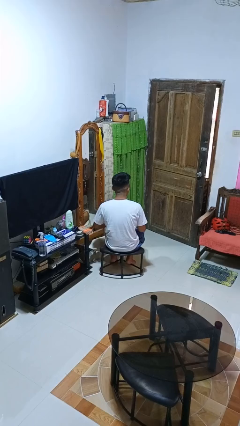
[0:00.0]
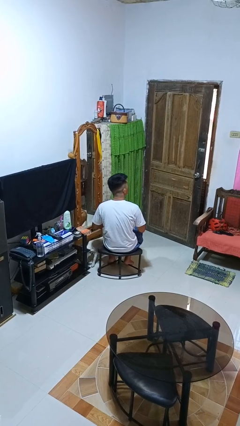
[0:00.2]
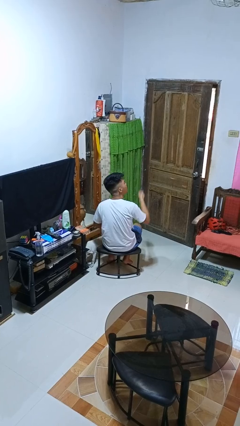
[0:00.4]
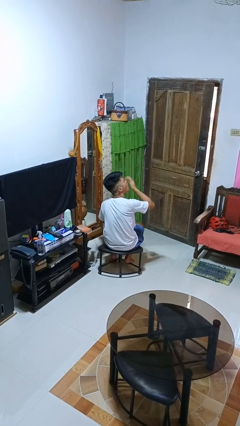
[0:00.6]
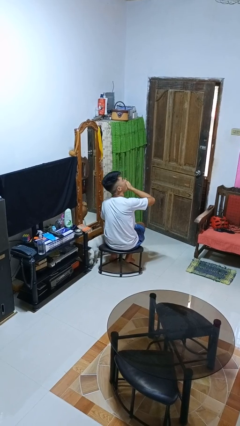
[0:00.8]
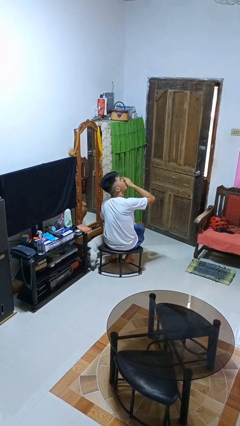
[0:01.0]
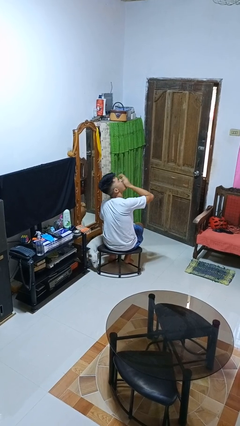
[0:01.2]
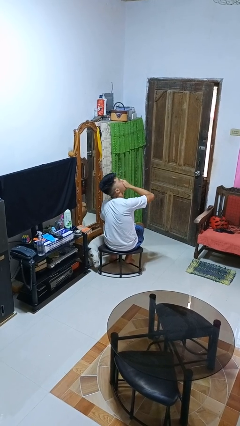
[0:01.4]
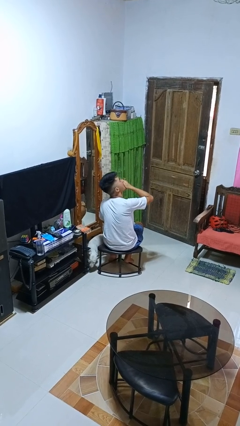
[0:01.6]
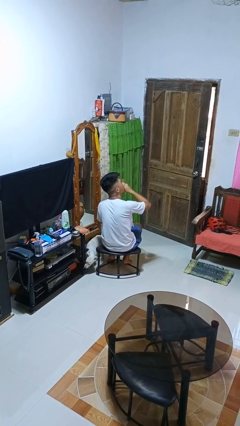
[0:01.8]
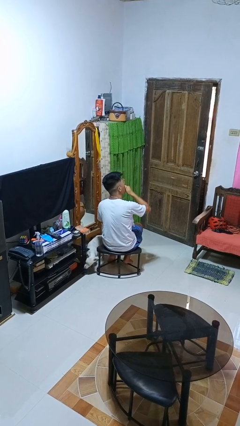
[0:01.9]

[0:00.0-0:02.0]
person yawns

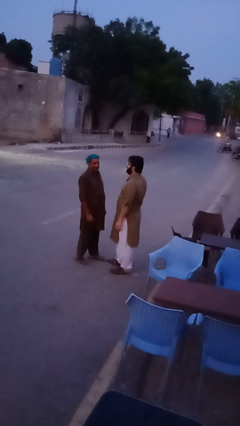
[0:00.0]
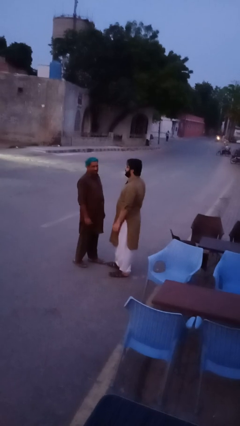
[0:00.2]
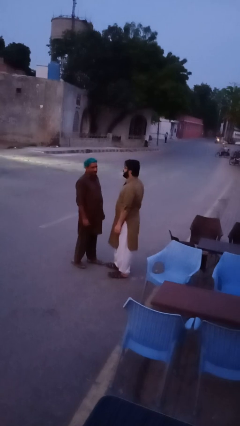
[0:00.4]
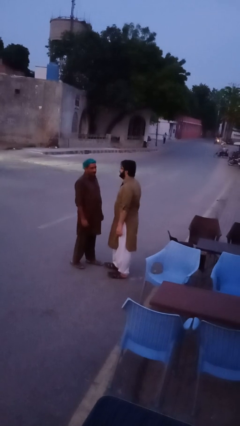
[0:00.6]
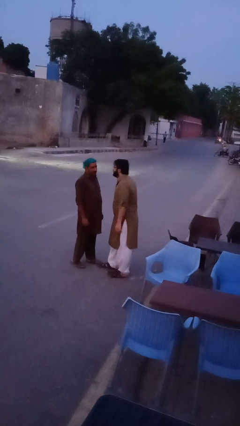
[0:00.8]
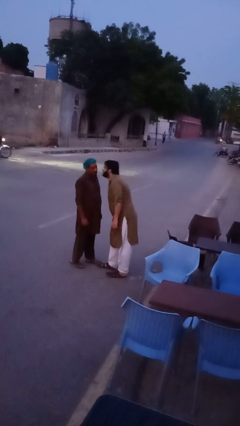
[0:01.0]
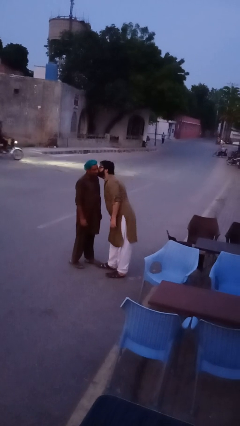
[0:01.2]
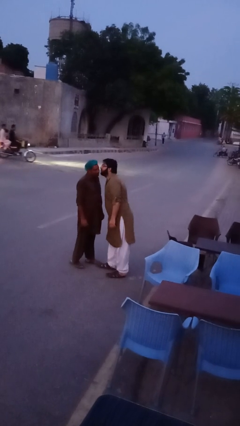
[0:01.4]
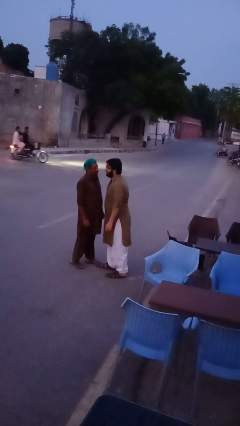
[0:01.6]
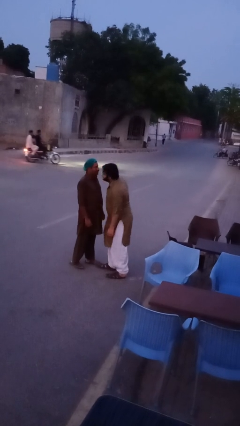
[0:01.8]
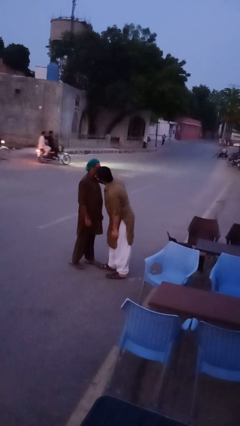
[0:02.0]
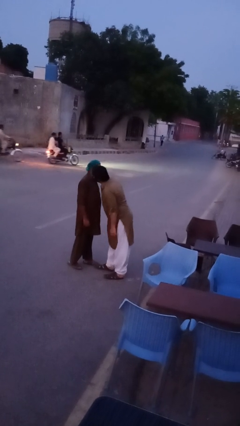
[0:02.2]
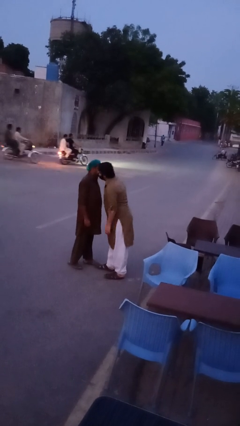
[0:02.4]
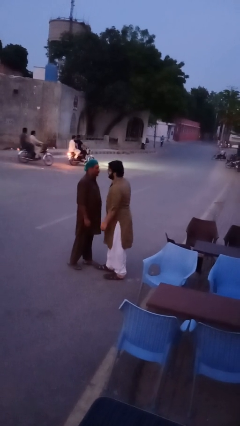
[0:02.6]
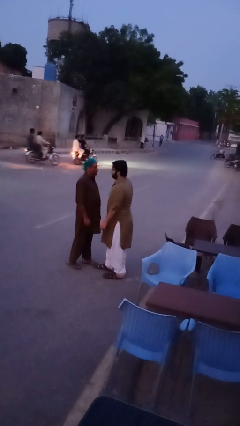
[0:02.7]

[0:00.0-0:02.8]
person kisses cheek of person

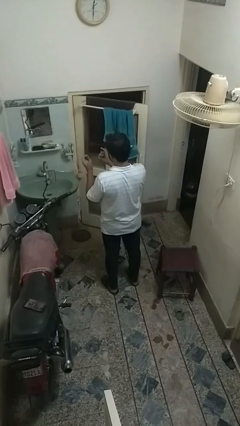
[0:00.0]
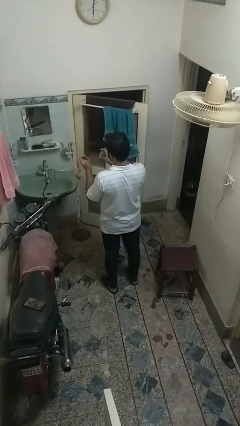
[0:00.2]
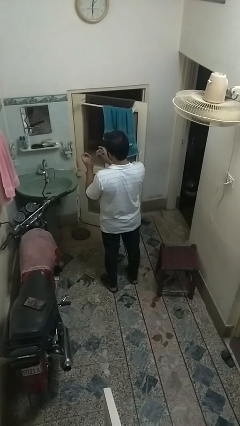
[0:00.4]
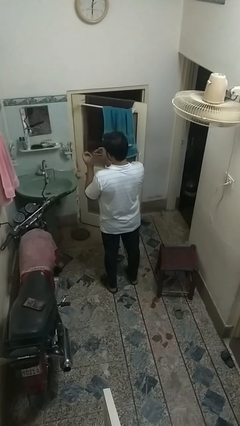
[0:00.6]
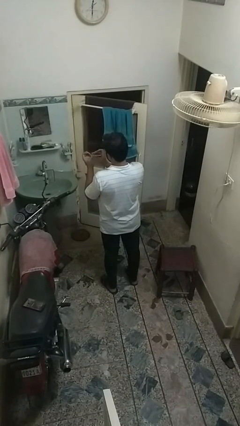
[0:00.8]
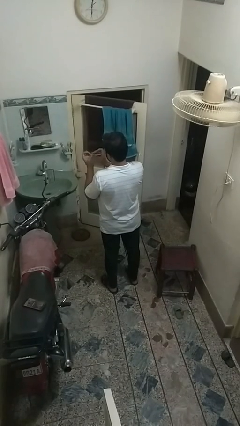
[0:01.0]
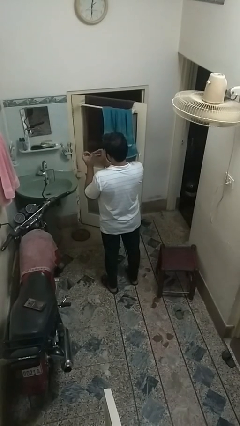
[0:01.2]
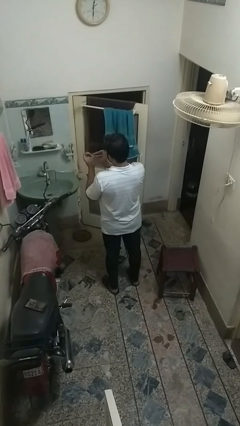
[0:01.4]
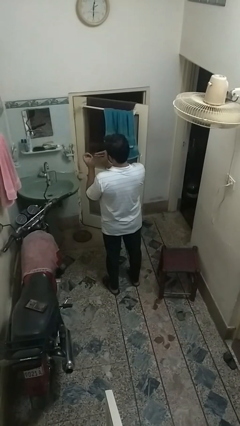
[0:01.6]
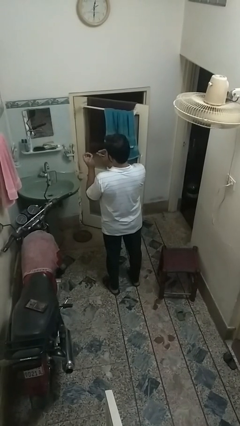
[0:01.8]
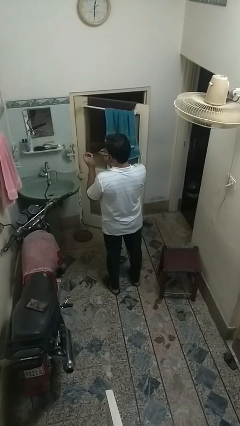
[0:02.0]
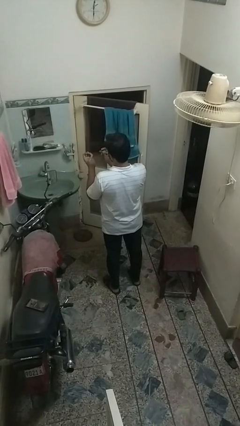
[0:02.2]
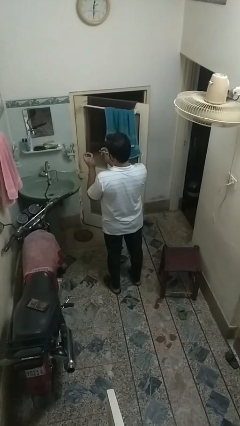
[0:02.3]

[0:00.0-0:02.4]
person clips fingernails

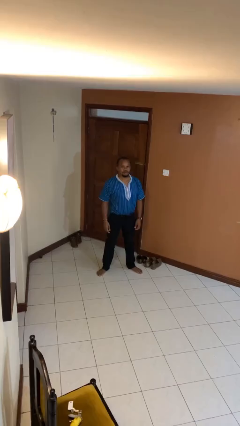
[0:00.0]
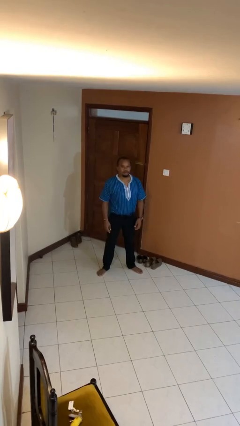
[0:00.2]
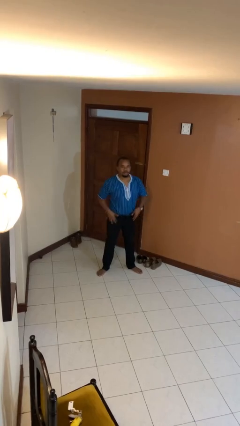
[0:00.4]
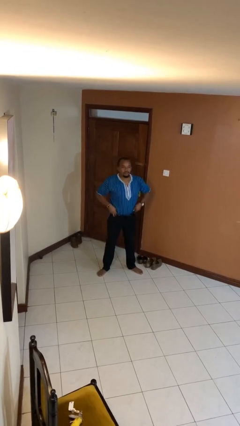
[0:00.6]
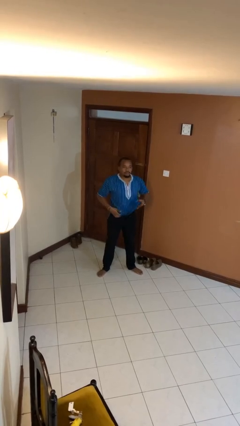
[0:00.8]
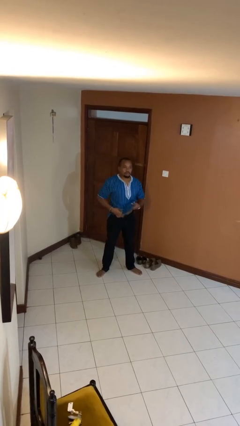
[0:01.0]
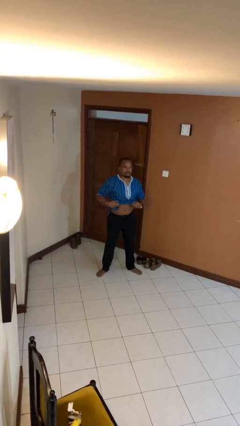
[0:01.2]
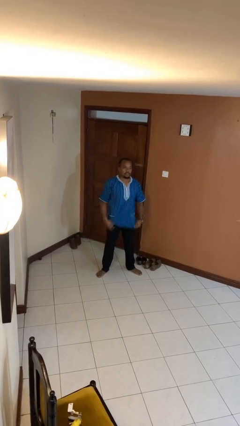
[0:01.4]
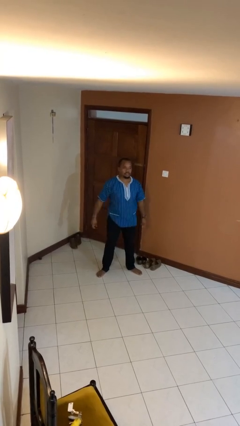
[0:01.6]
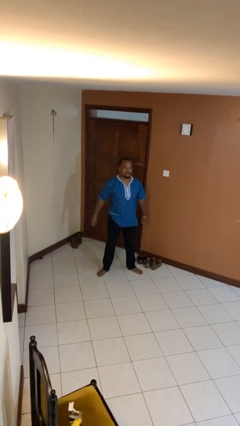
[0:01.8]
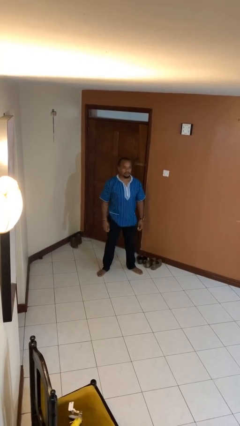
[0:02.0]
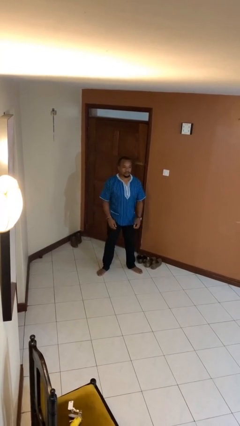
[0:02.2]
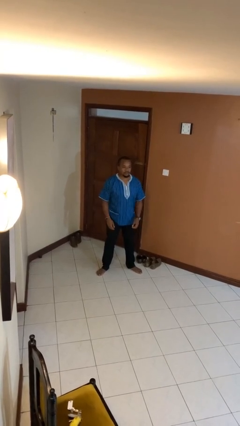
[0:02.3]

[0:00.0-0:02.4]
person untucks shirt

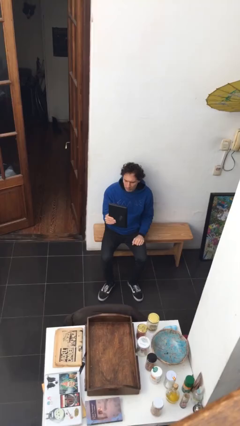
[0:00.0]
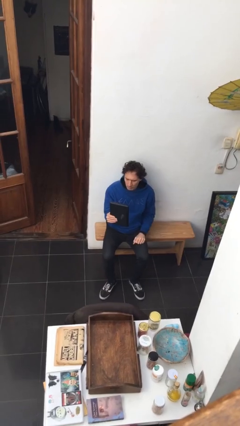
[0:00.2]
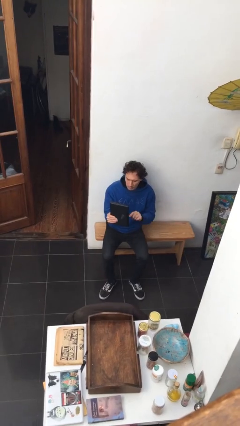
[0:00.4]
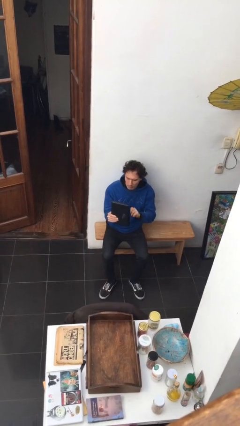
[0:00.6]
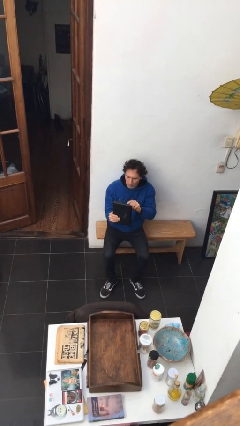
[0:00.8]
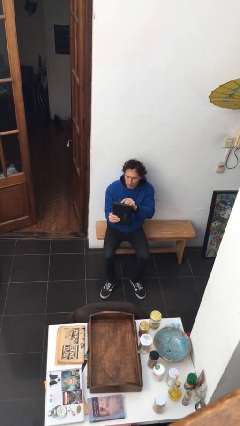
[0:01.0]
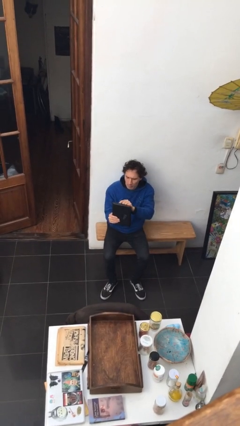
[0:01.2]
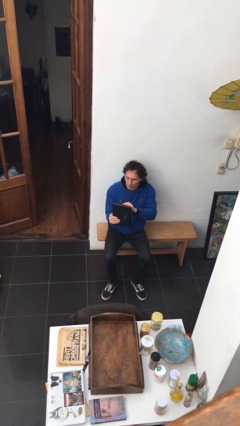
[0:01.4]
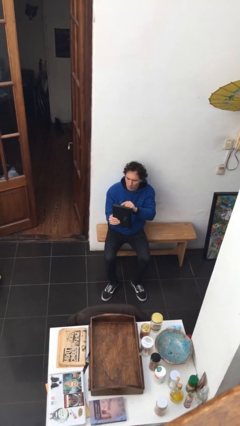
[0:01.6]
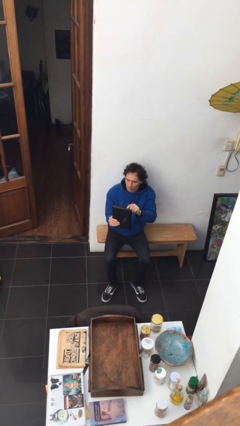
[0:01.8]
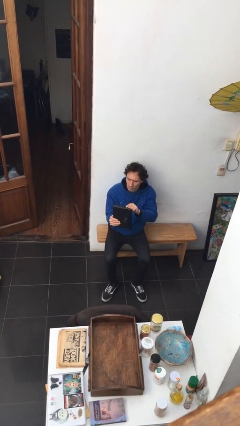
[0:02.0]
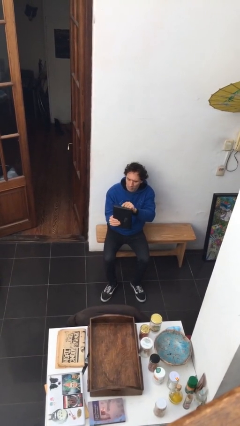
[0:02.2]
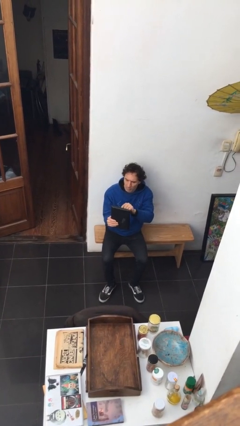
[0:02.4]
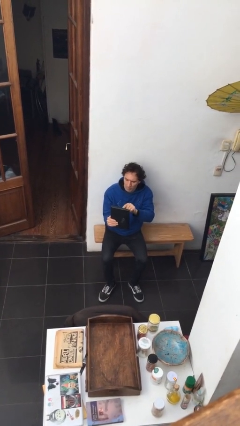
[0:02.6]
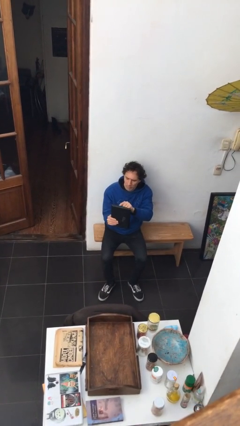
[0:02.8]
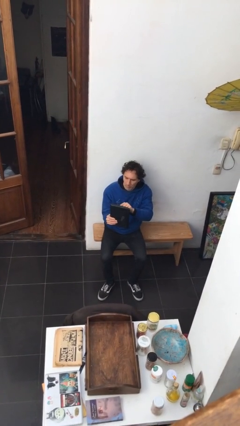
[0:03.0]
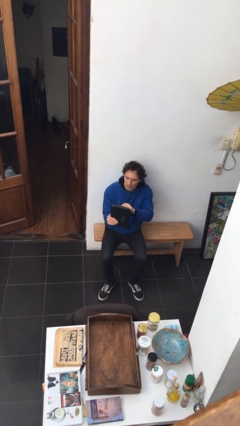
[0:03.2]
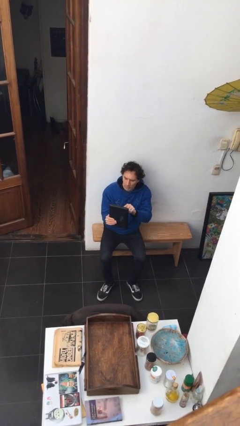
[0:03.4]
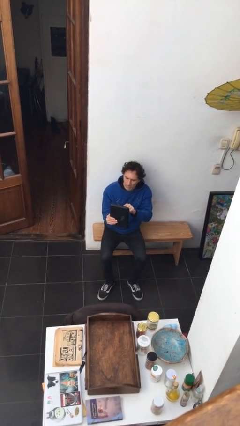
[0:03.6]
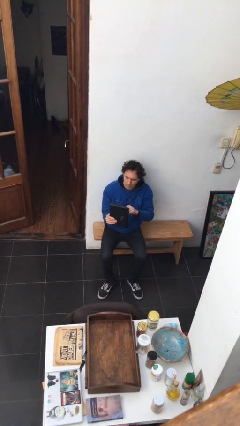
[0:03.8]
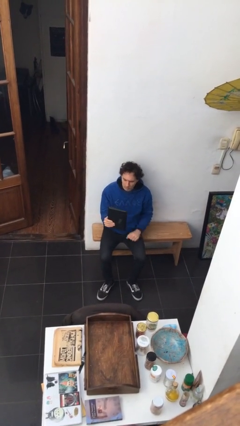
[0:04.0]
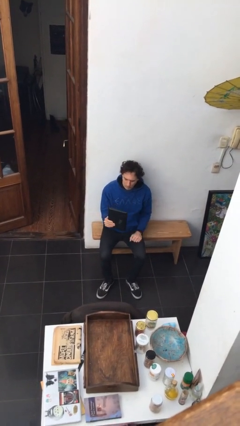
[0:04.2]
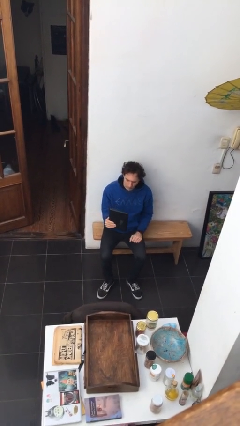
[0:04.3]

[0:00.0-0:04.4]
person interacts with tablet

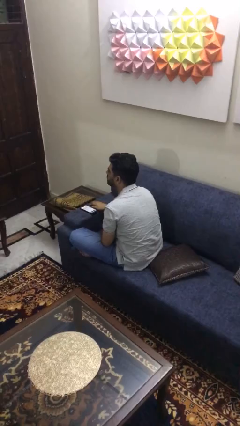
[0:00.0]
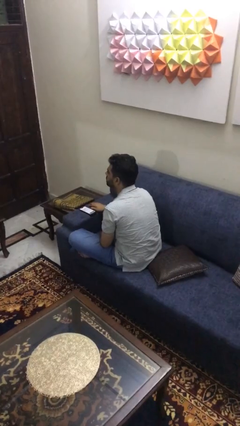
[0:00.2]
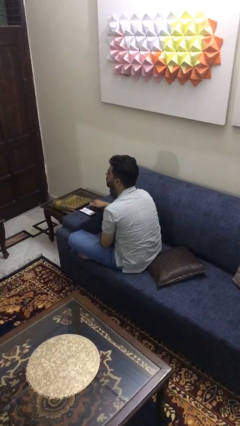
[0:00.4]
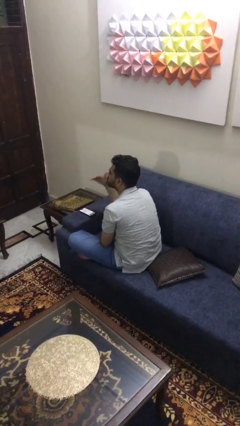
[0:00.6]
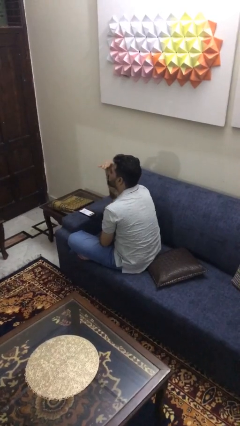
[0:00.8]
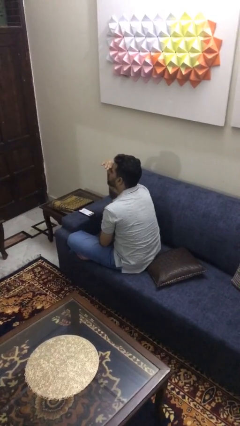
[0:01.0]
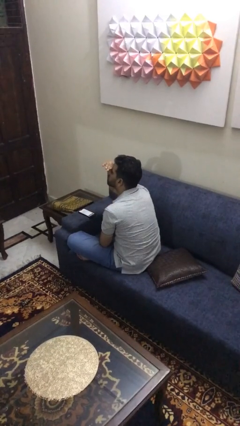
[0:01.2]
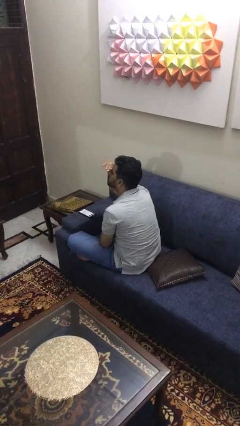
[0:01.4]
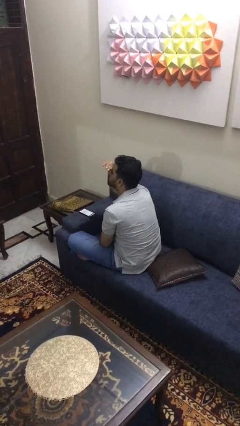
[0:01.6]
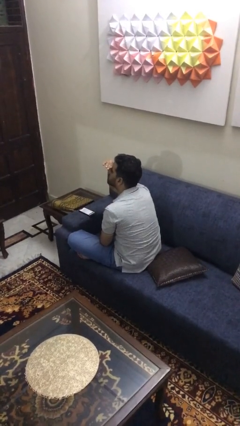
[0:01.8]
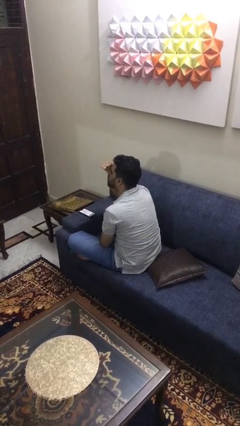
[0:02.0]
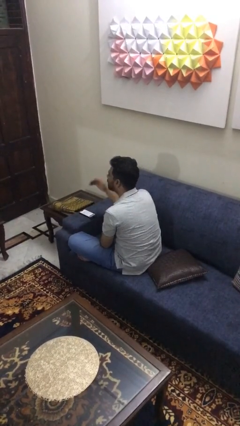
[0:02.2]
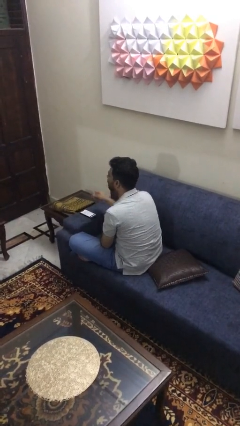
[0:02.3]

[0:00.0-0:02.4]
person shades eyes

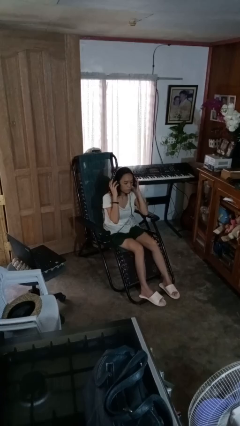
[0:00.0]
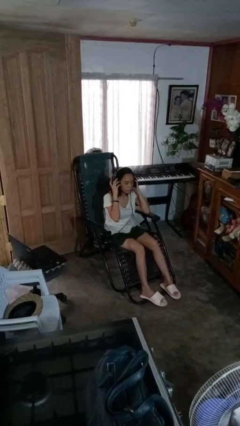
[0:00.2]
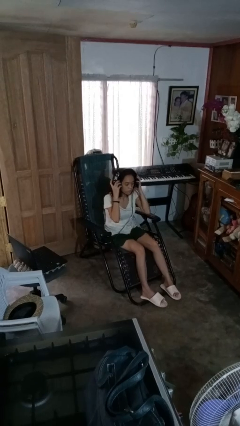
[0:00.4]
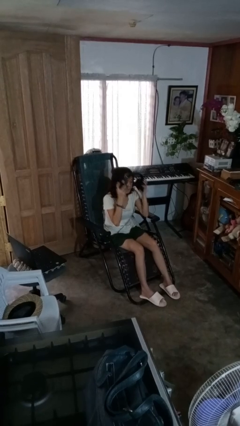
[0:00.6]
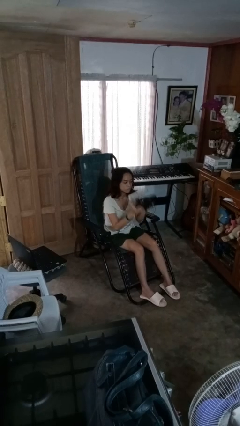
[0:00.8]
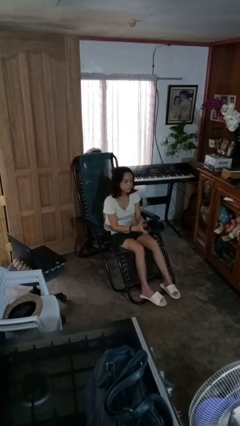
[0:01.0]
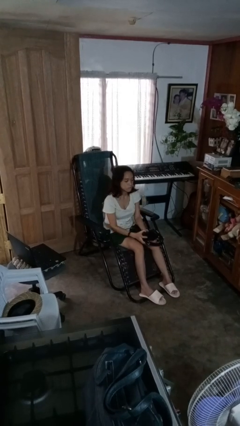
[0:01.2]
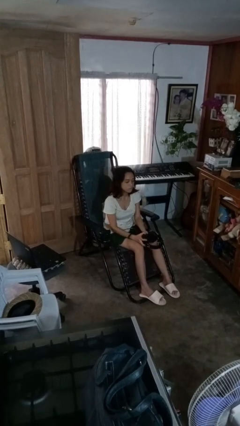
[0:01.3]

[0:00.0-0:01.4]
person takes off headphones
